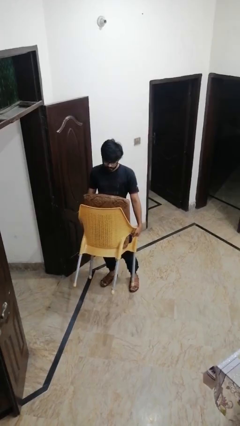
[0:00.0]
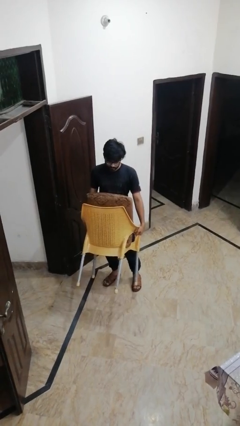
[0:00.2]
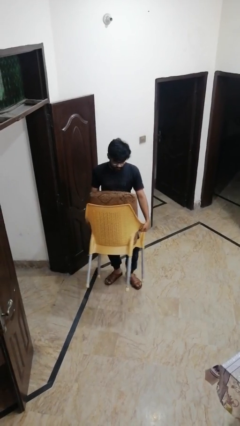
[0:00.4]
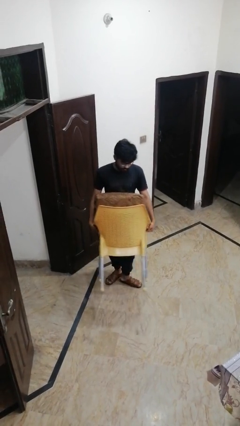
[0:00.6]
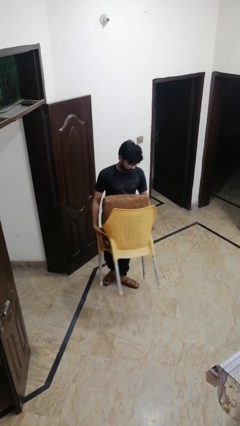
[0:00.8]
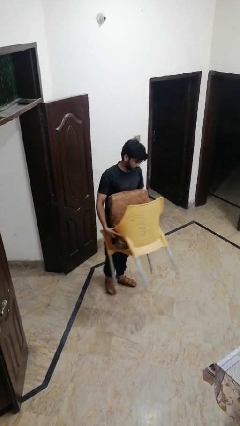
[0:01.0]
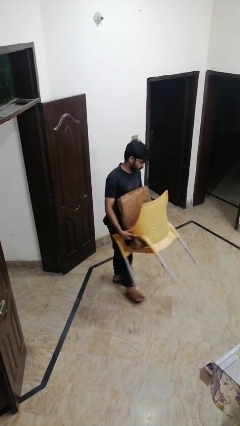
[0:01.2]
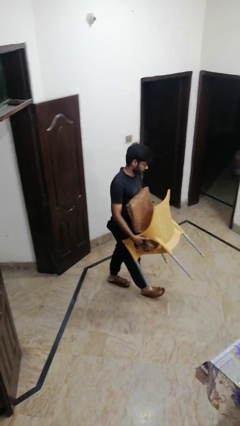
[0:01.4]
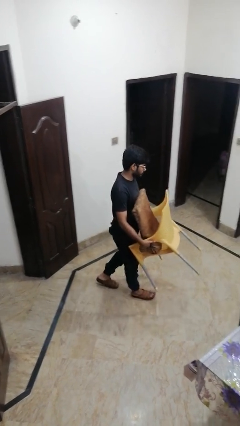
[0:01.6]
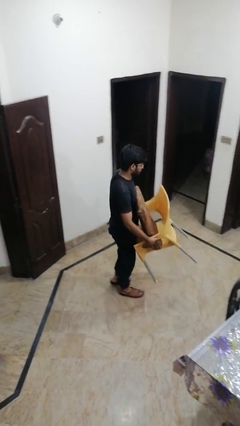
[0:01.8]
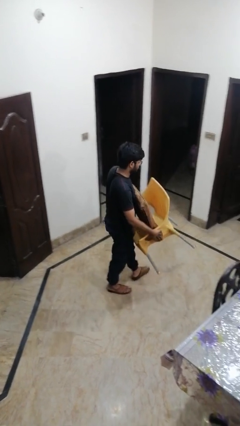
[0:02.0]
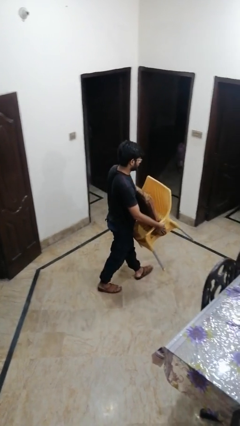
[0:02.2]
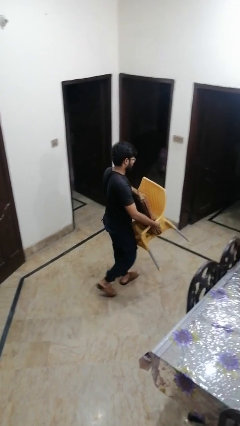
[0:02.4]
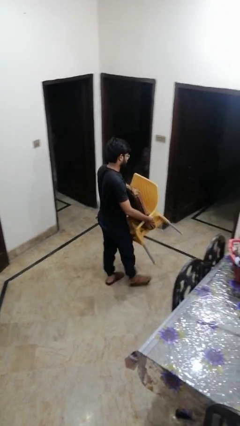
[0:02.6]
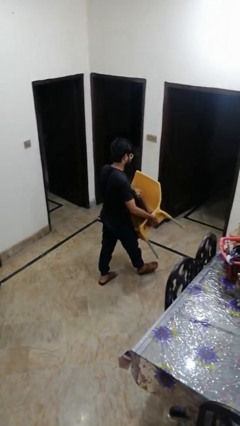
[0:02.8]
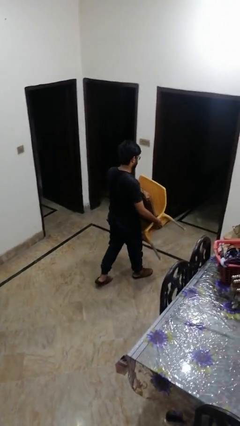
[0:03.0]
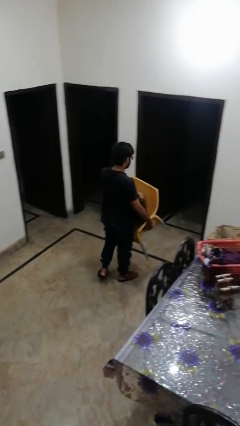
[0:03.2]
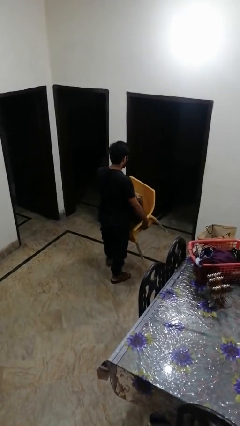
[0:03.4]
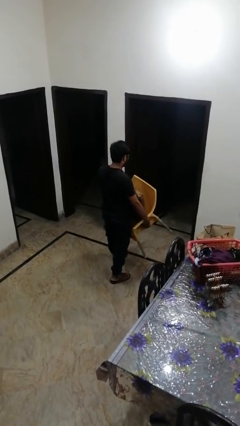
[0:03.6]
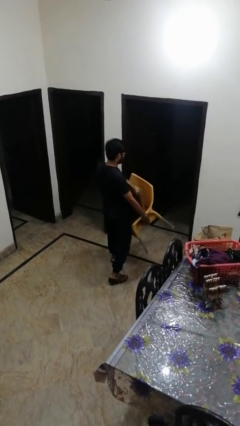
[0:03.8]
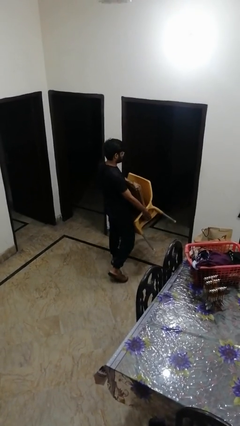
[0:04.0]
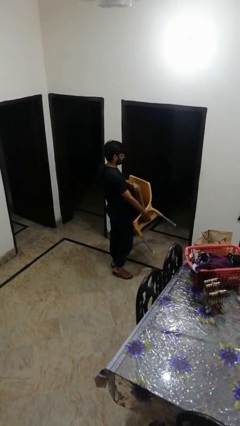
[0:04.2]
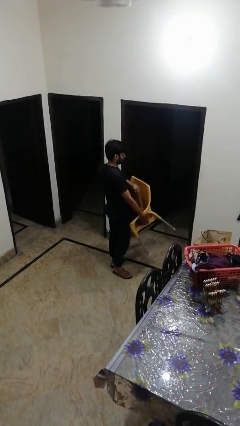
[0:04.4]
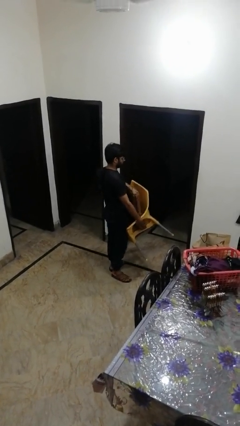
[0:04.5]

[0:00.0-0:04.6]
person carries furniture

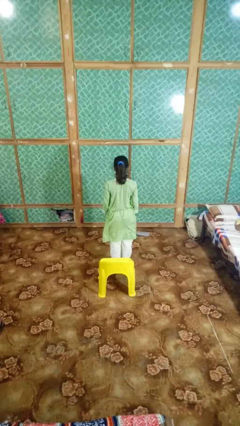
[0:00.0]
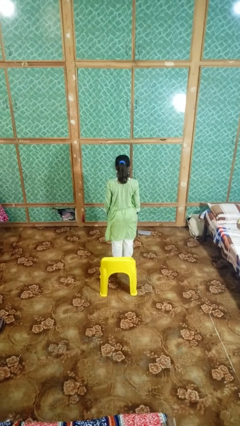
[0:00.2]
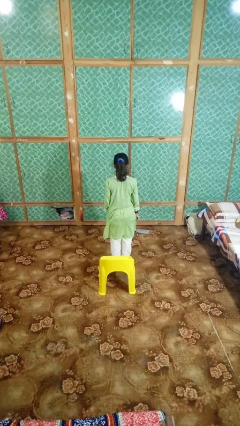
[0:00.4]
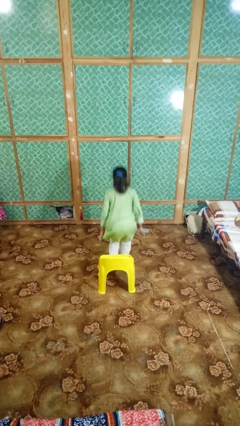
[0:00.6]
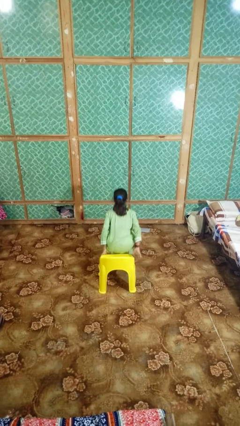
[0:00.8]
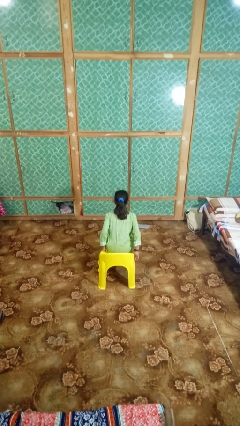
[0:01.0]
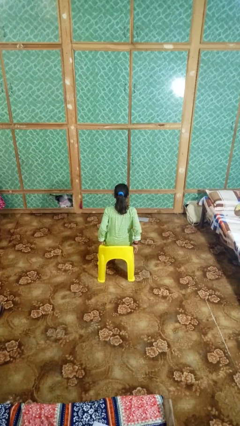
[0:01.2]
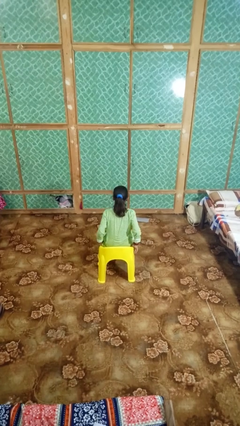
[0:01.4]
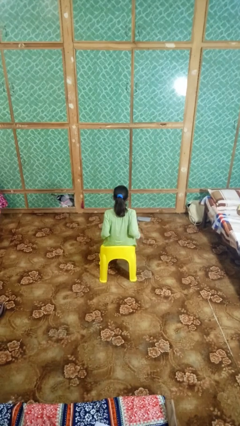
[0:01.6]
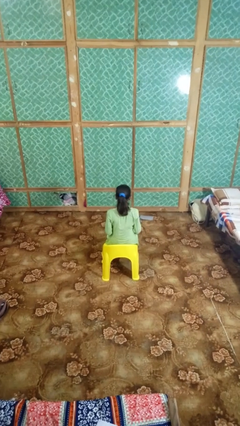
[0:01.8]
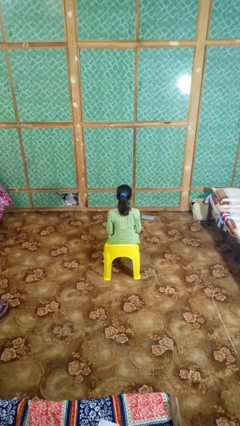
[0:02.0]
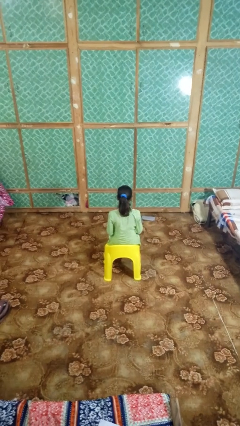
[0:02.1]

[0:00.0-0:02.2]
person sits down

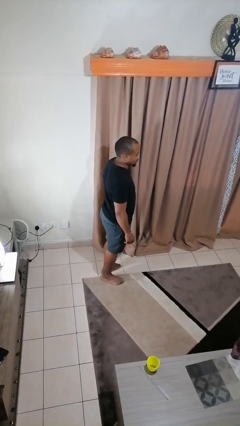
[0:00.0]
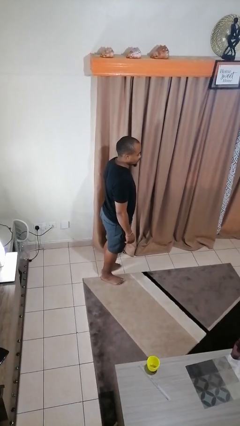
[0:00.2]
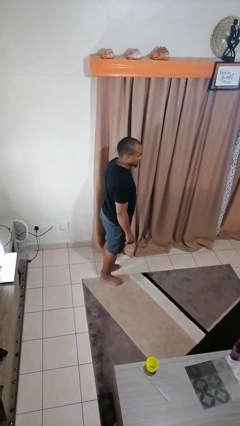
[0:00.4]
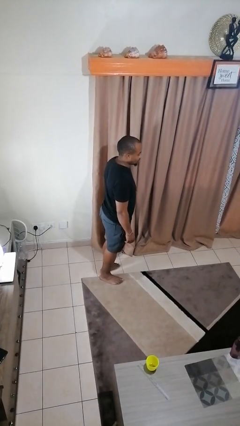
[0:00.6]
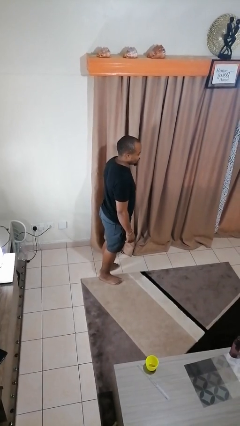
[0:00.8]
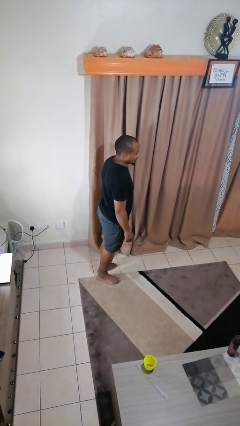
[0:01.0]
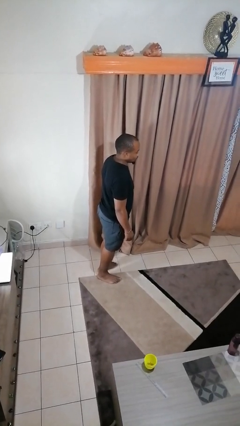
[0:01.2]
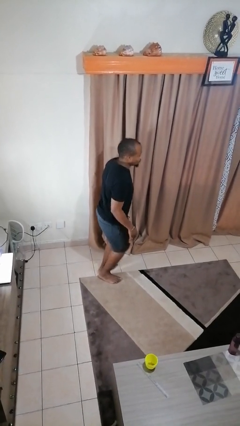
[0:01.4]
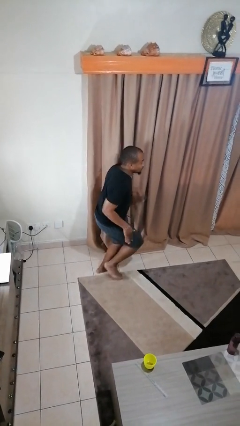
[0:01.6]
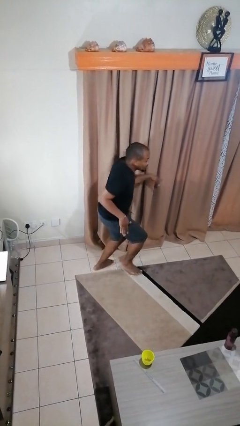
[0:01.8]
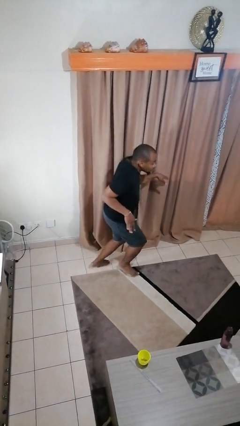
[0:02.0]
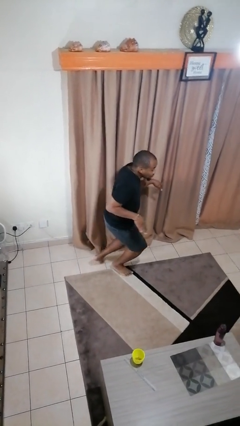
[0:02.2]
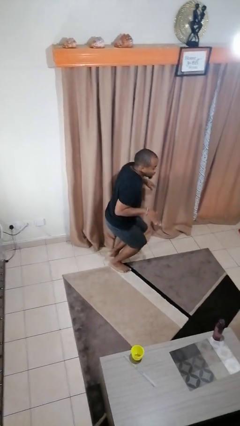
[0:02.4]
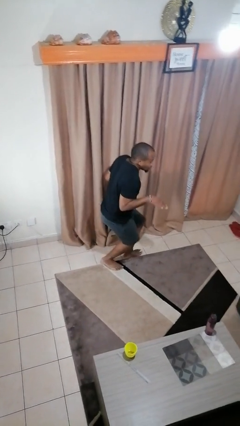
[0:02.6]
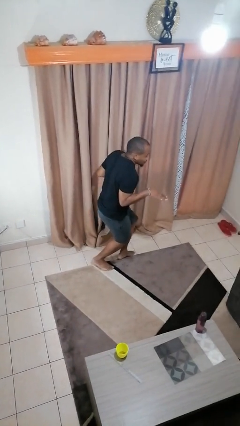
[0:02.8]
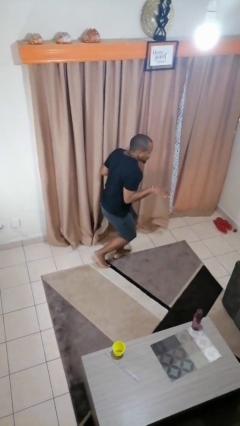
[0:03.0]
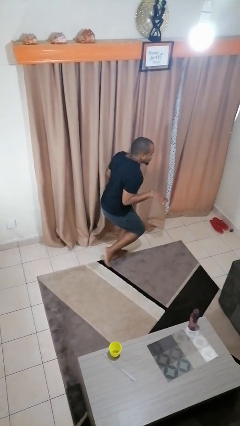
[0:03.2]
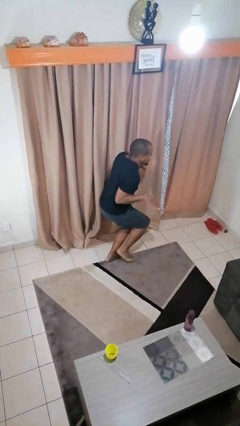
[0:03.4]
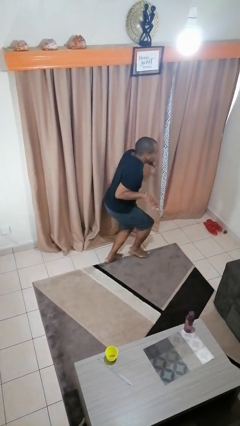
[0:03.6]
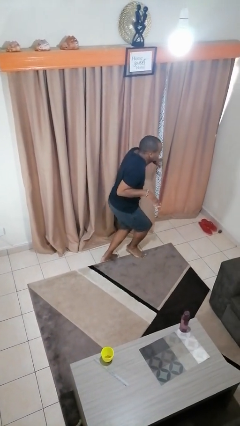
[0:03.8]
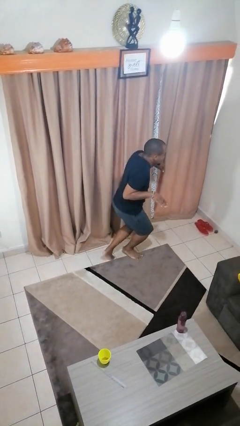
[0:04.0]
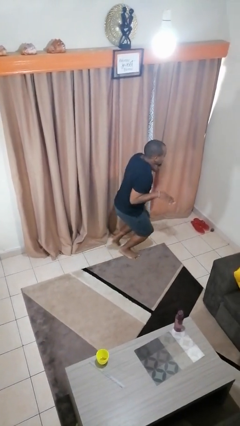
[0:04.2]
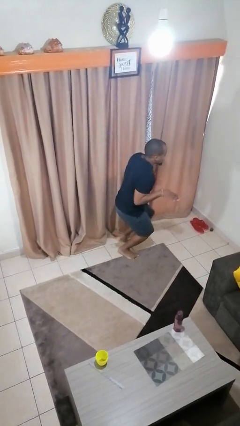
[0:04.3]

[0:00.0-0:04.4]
person throws object into air

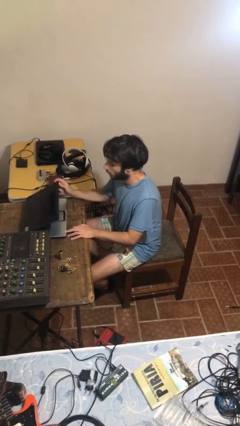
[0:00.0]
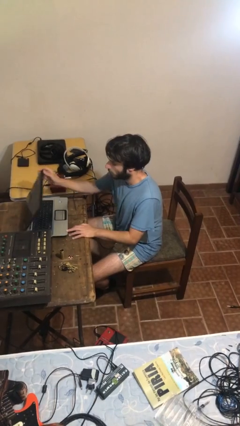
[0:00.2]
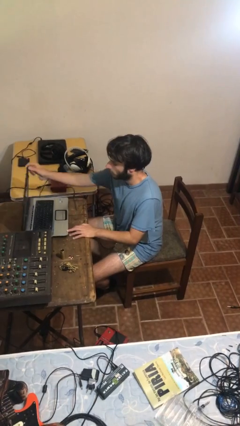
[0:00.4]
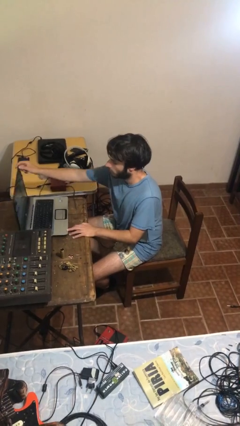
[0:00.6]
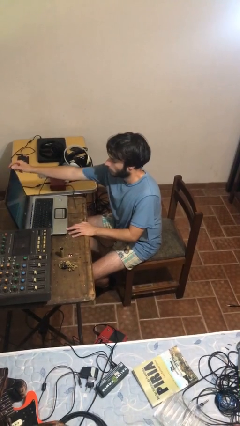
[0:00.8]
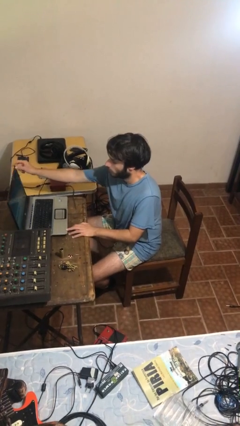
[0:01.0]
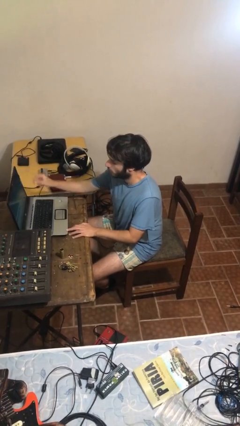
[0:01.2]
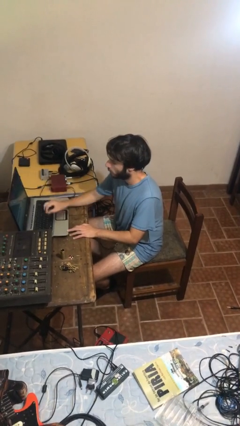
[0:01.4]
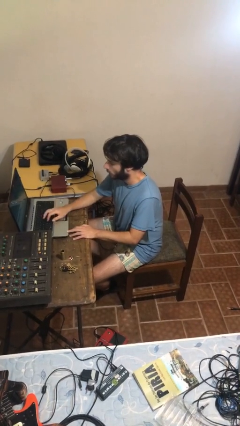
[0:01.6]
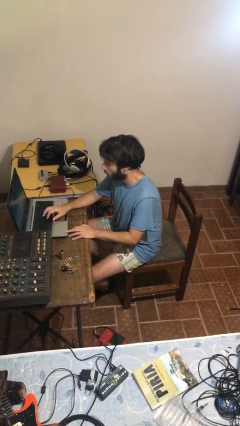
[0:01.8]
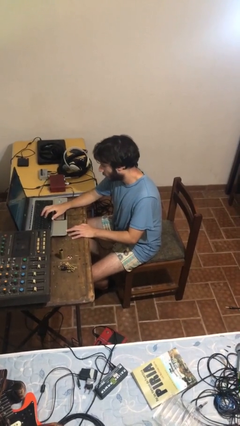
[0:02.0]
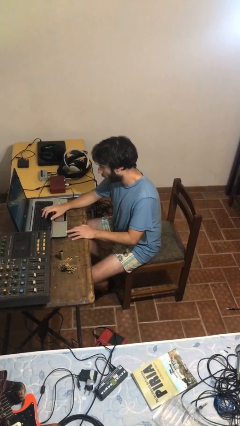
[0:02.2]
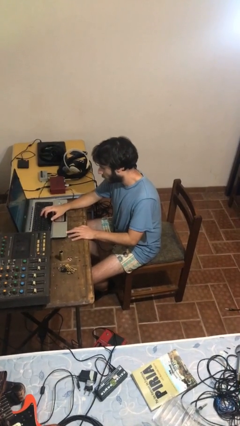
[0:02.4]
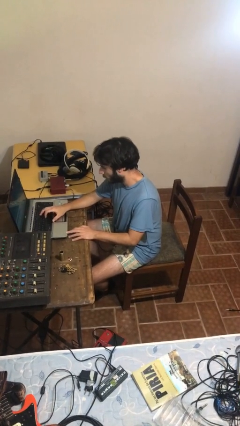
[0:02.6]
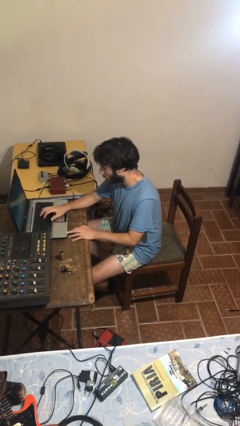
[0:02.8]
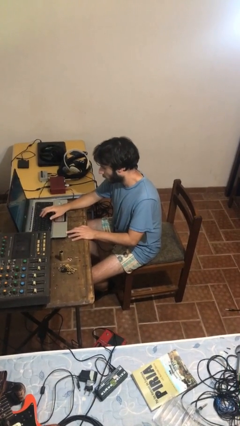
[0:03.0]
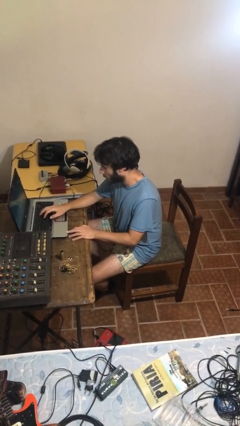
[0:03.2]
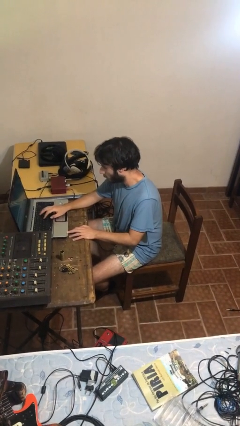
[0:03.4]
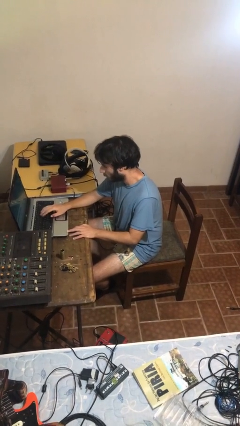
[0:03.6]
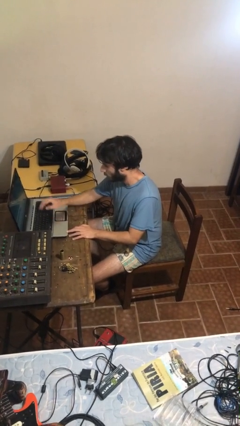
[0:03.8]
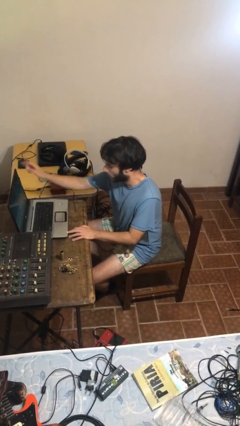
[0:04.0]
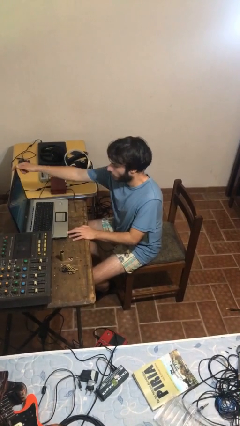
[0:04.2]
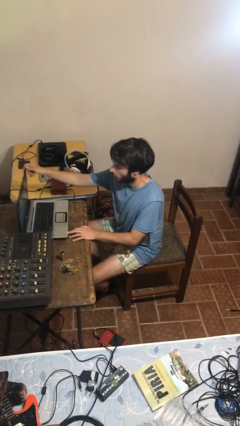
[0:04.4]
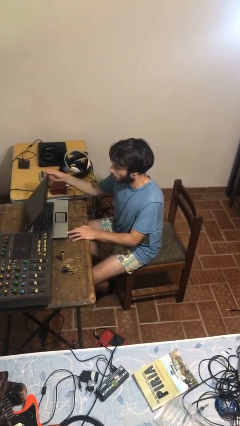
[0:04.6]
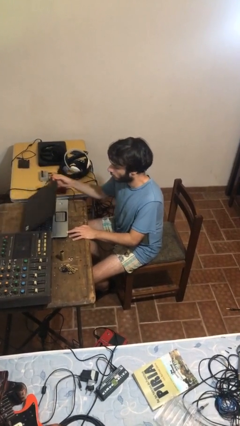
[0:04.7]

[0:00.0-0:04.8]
person interacts with laptop

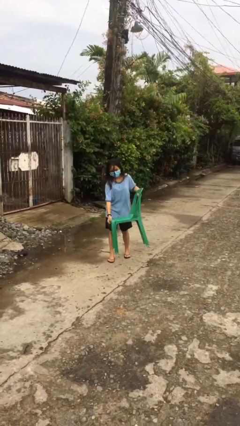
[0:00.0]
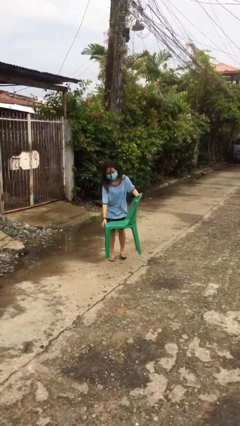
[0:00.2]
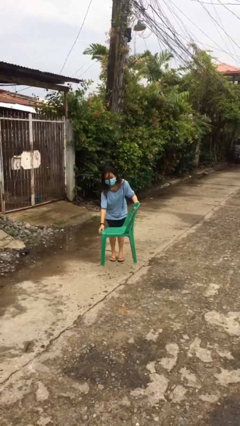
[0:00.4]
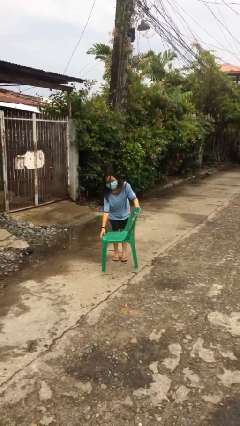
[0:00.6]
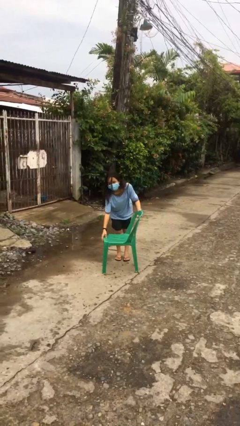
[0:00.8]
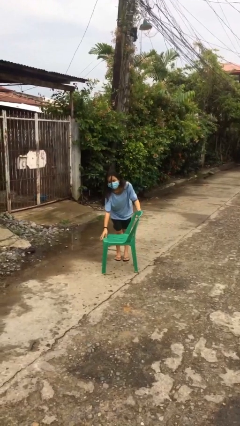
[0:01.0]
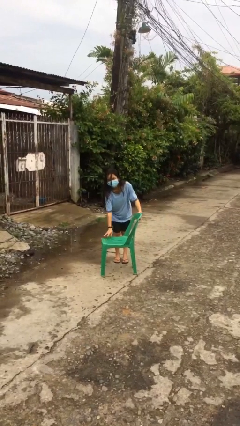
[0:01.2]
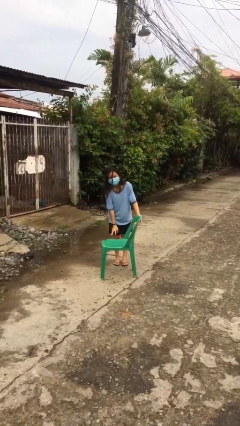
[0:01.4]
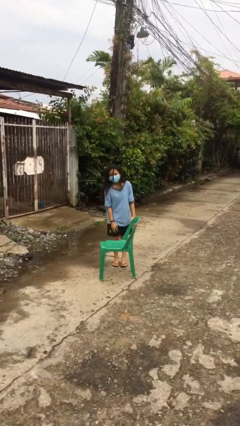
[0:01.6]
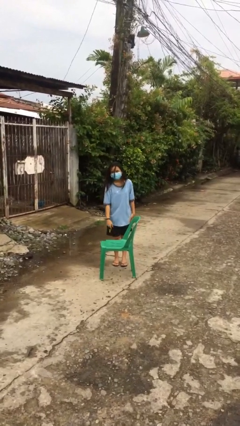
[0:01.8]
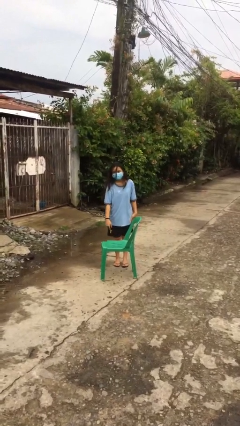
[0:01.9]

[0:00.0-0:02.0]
person puts down object on floor
